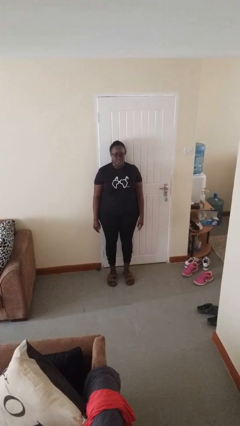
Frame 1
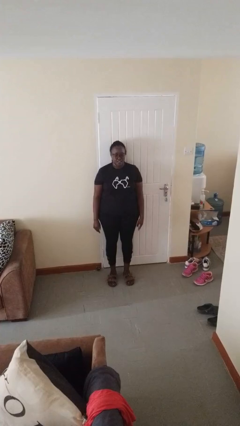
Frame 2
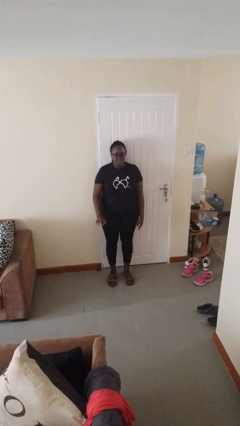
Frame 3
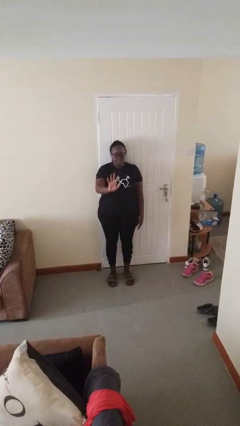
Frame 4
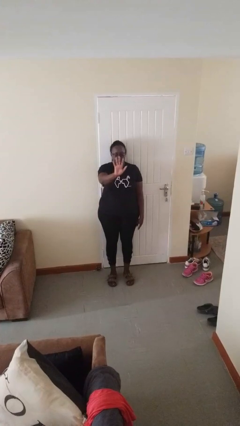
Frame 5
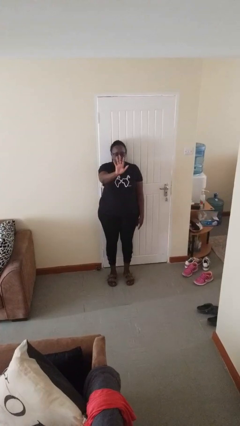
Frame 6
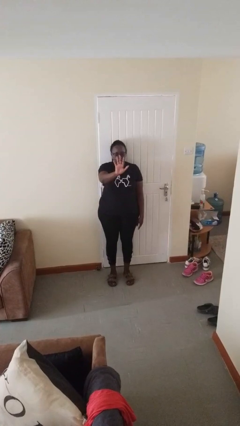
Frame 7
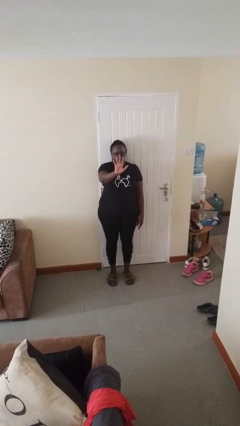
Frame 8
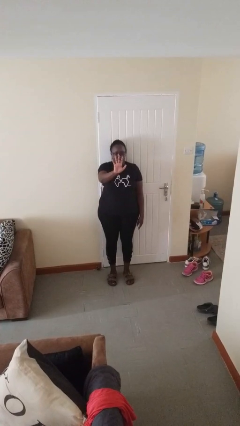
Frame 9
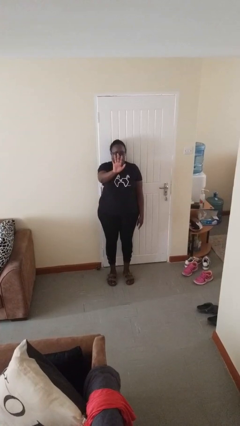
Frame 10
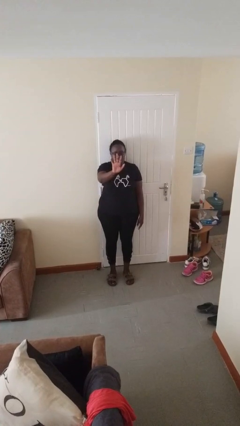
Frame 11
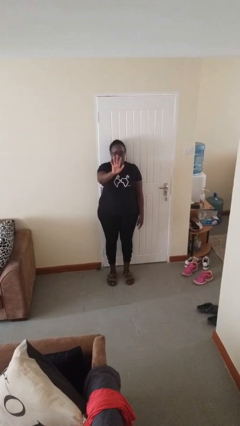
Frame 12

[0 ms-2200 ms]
person gestures number five

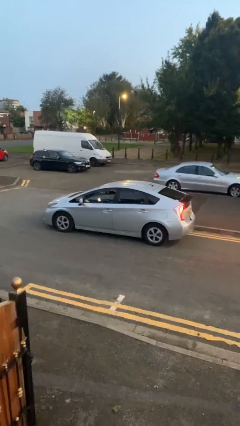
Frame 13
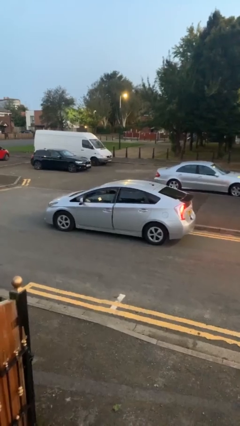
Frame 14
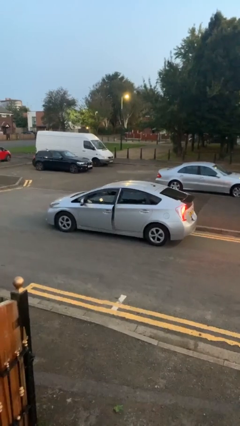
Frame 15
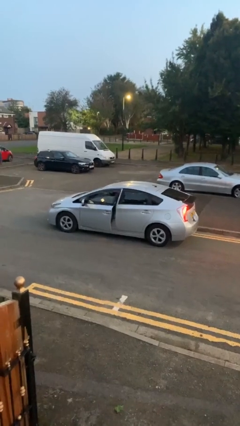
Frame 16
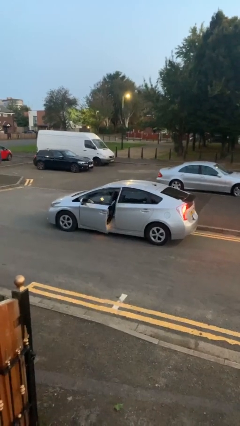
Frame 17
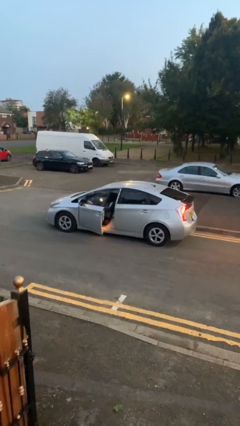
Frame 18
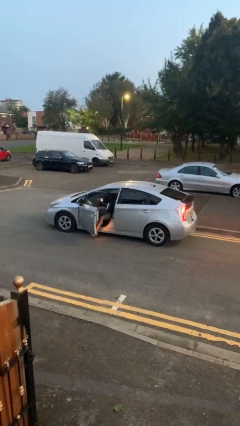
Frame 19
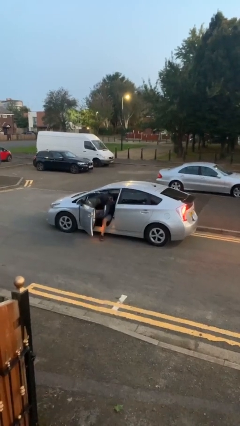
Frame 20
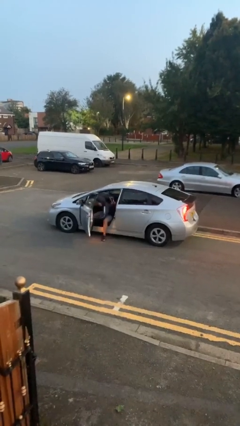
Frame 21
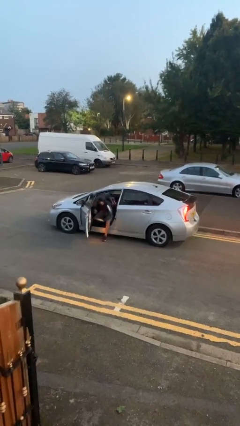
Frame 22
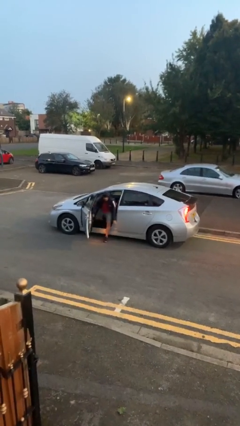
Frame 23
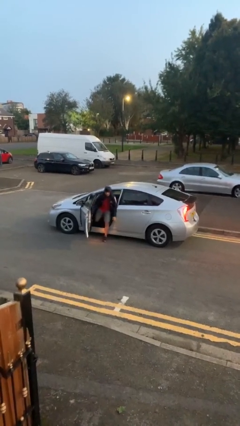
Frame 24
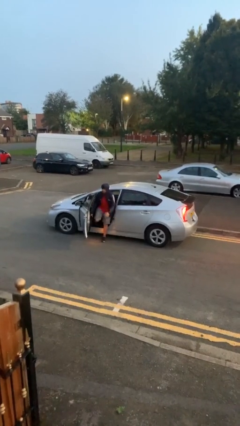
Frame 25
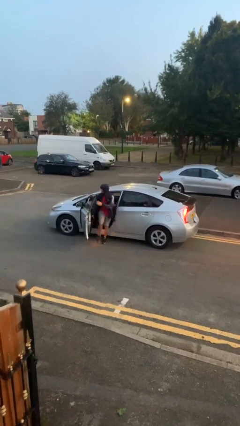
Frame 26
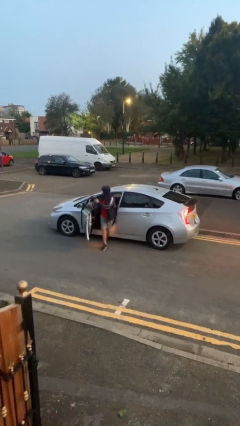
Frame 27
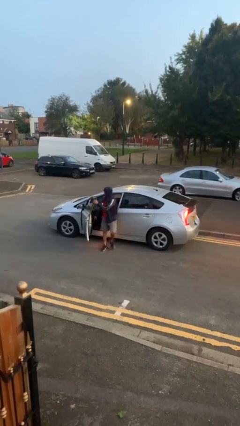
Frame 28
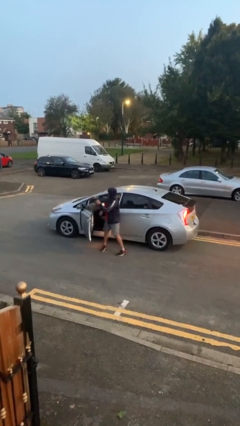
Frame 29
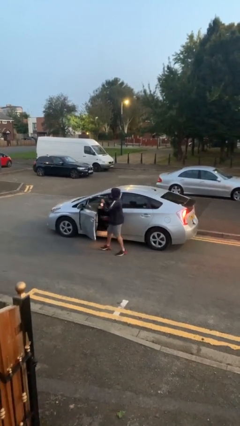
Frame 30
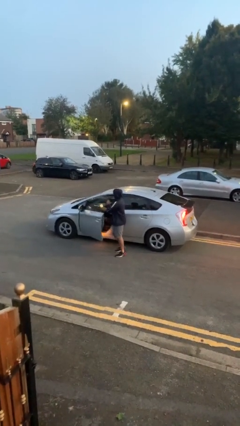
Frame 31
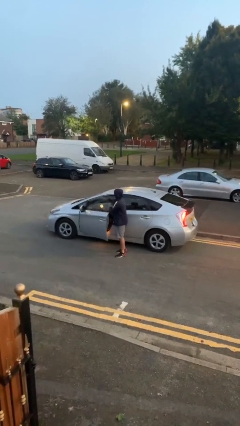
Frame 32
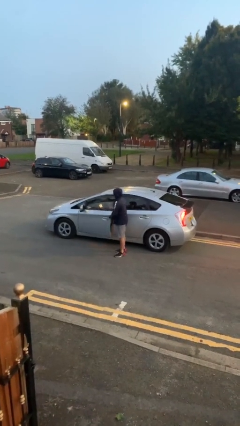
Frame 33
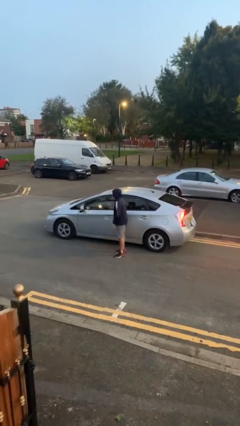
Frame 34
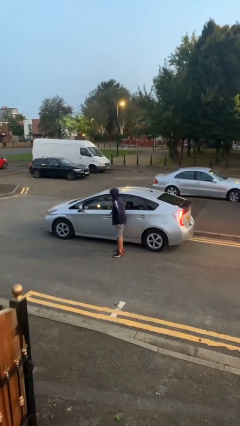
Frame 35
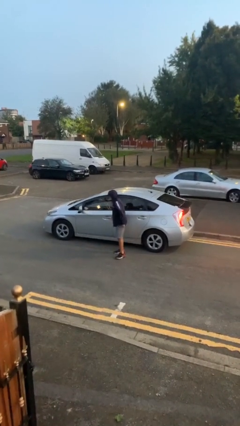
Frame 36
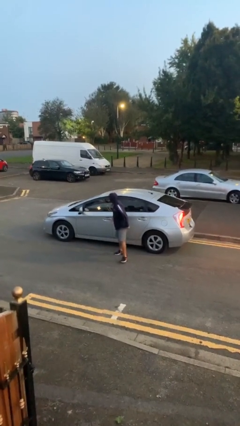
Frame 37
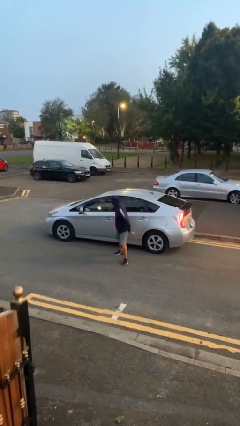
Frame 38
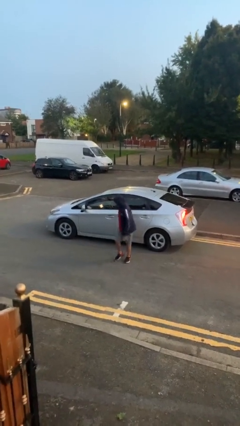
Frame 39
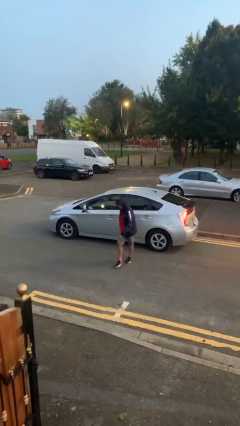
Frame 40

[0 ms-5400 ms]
car drops off person

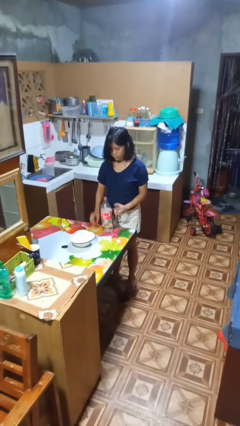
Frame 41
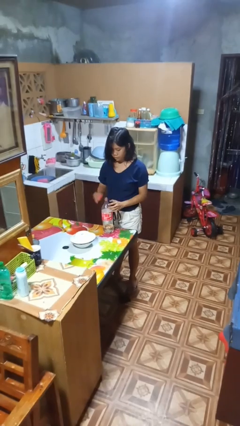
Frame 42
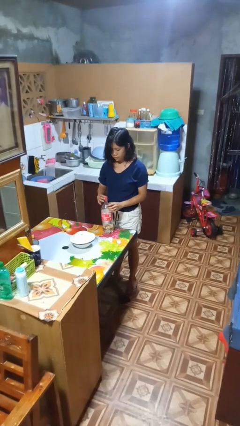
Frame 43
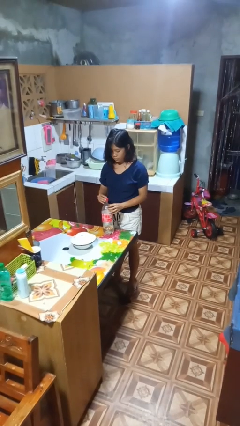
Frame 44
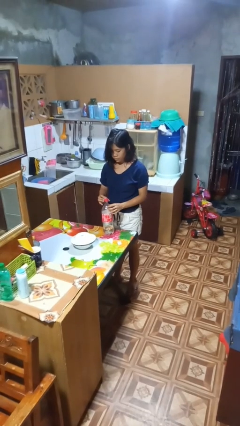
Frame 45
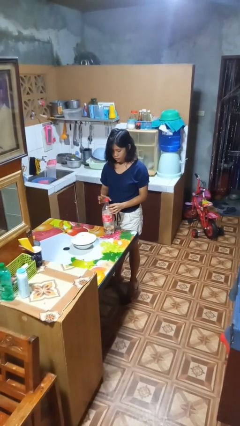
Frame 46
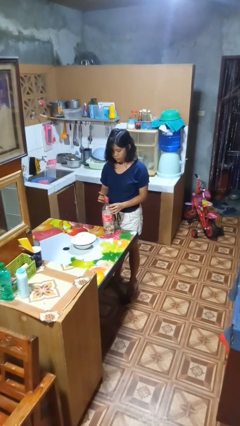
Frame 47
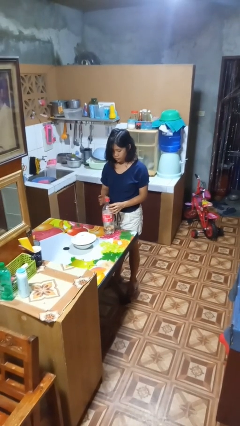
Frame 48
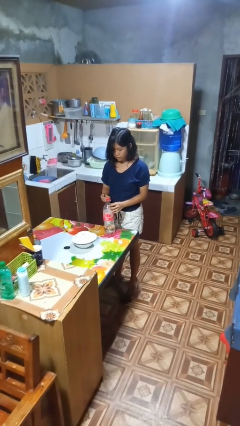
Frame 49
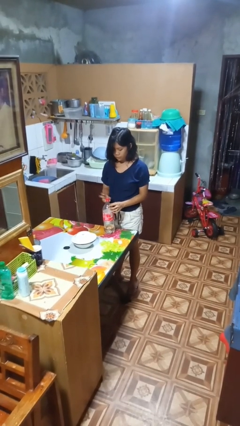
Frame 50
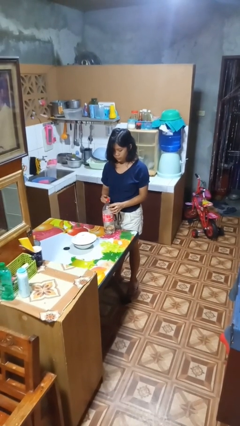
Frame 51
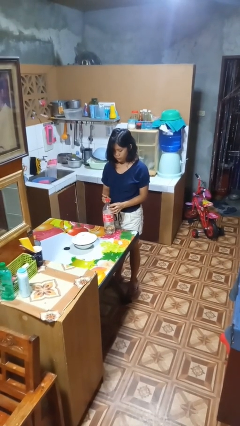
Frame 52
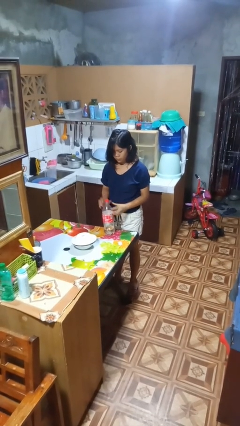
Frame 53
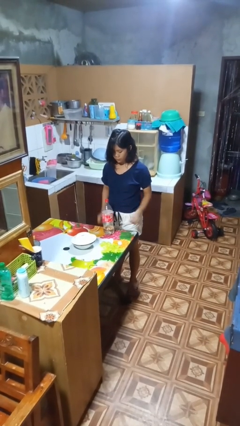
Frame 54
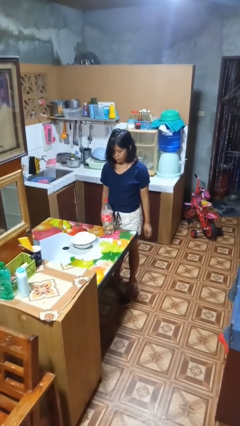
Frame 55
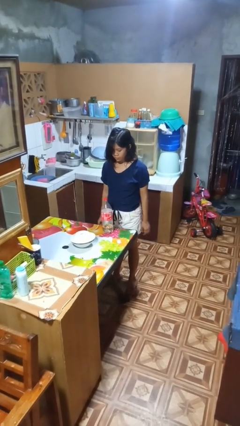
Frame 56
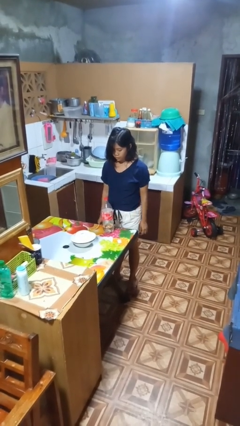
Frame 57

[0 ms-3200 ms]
person screws lid to bottle

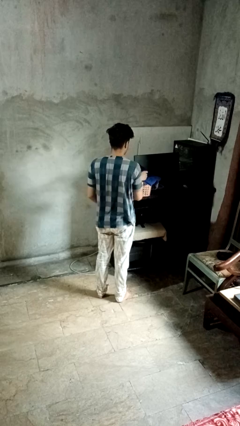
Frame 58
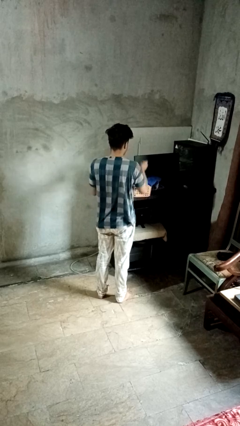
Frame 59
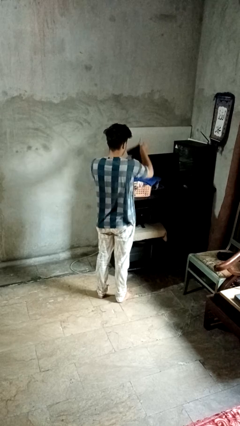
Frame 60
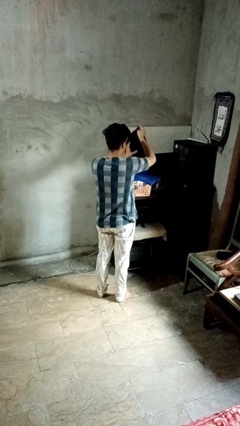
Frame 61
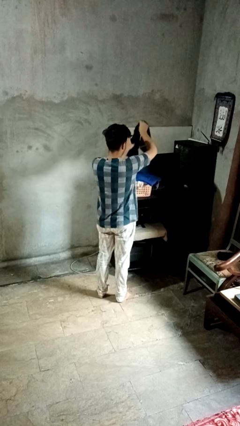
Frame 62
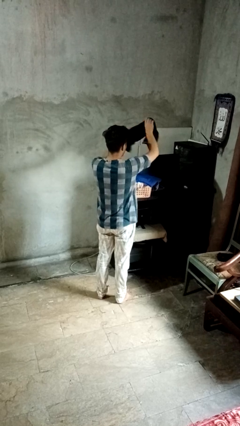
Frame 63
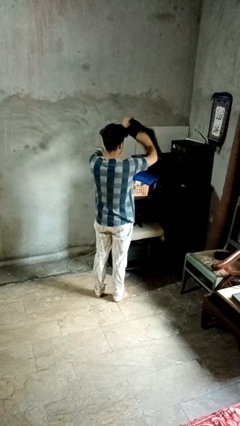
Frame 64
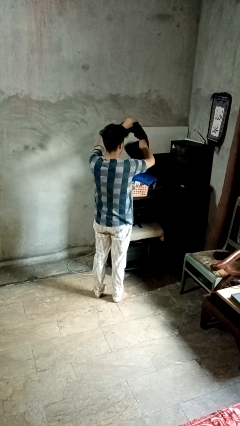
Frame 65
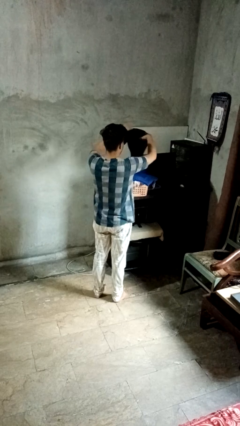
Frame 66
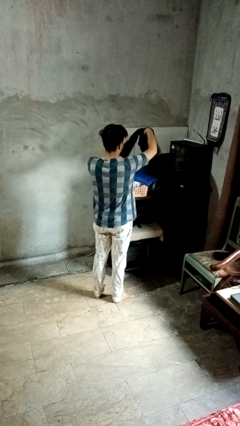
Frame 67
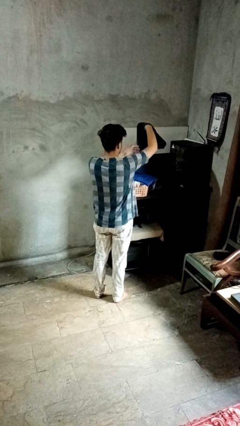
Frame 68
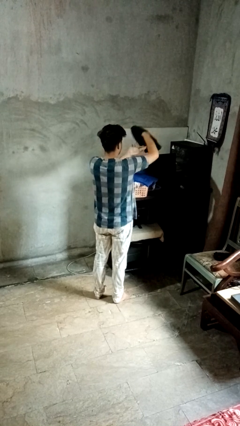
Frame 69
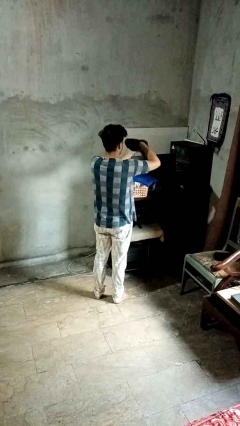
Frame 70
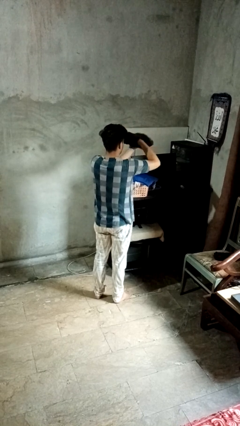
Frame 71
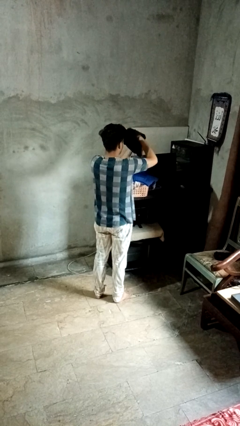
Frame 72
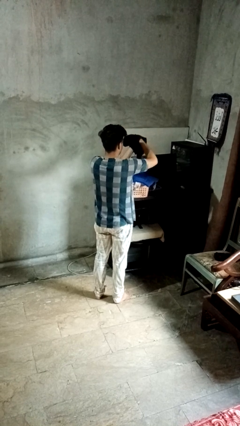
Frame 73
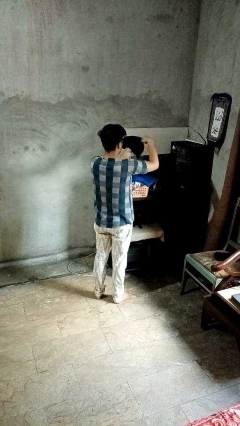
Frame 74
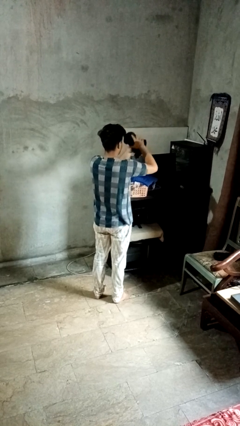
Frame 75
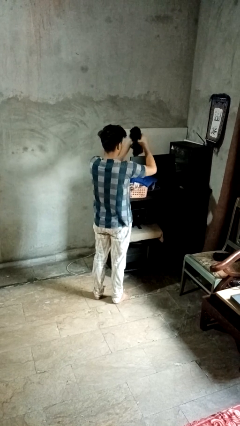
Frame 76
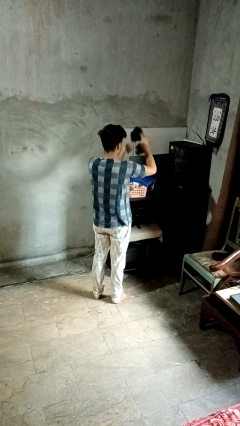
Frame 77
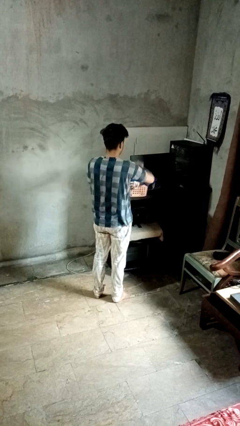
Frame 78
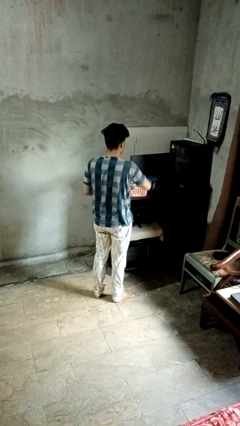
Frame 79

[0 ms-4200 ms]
person folds shirt

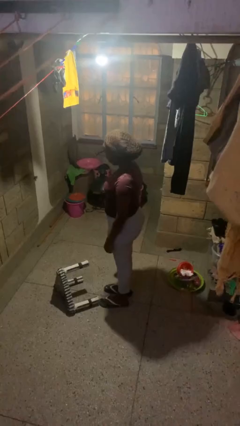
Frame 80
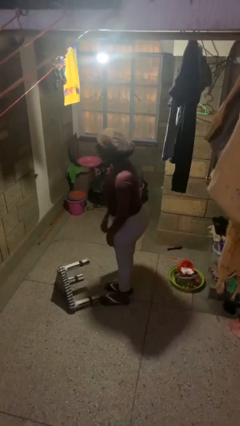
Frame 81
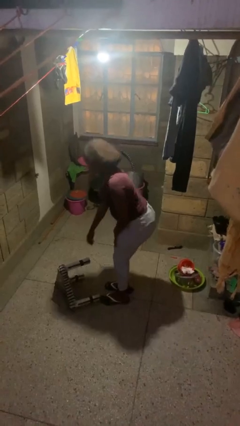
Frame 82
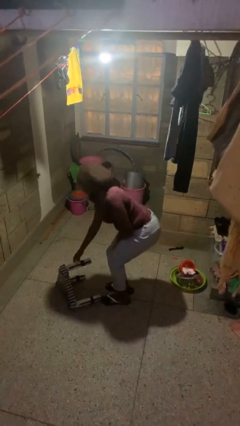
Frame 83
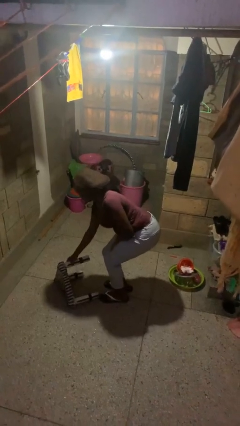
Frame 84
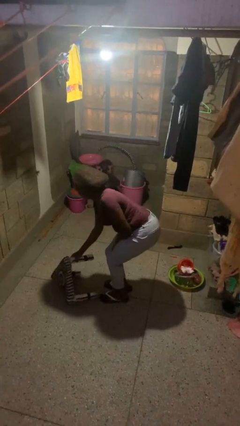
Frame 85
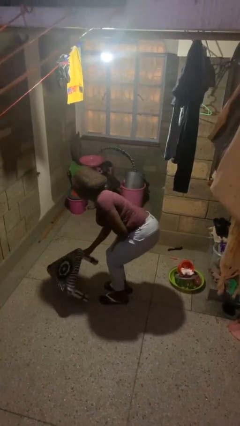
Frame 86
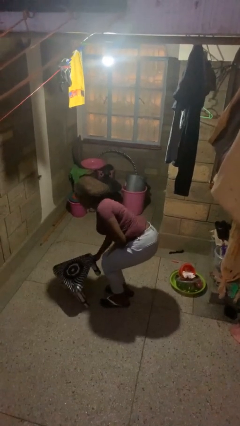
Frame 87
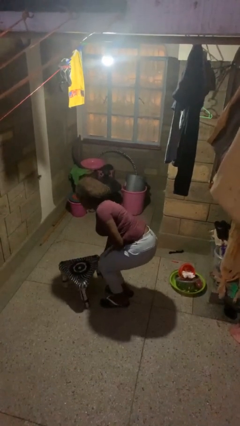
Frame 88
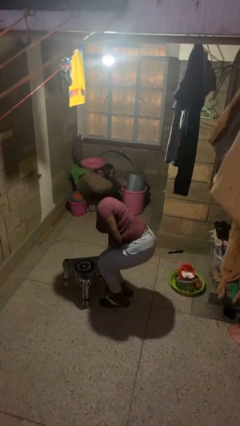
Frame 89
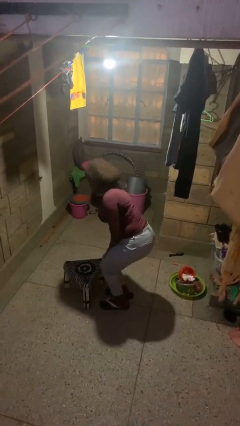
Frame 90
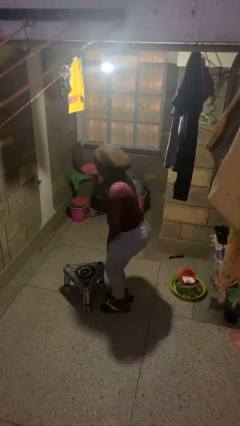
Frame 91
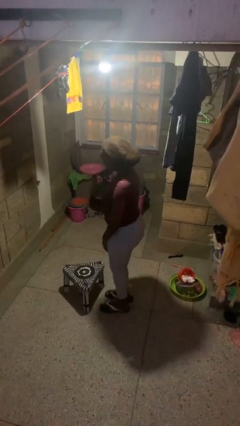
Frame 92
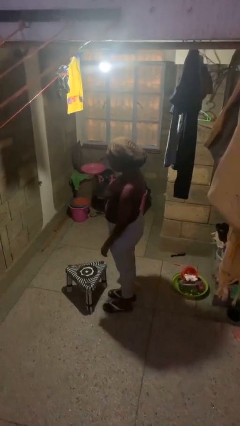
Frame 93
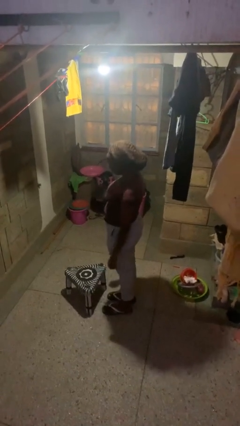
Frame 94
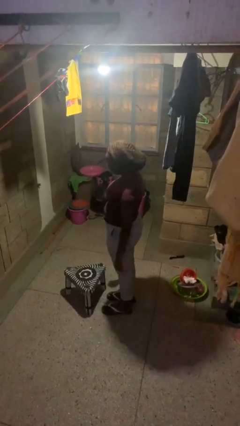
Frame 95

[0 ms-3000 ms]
person sets upright furniture

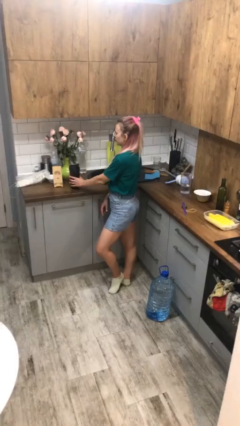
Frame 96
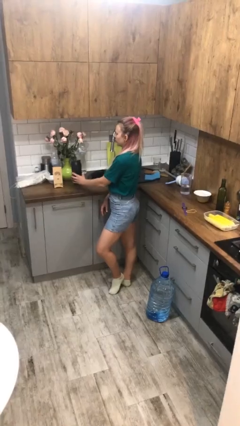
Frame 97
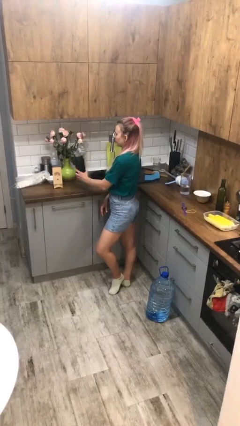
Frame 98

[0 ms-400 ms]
person picks up object from countertop
